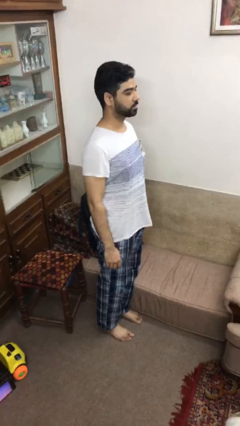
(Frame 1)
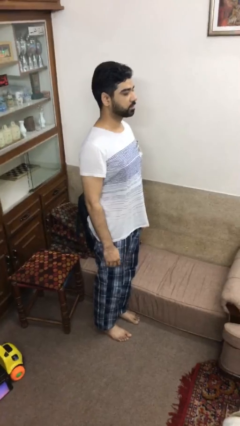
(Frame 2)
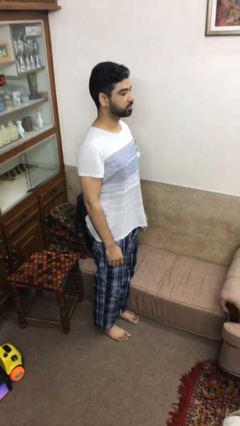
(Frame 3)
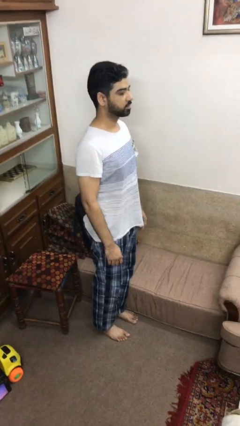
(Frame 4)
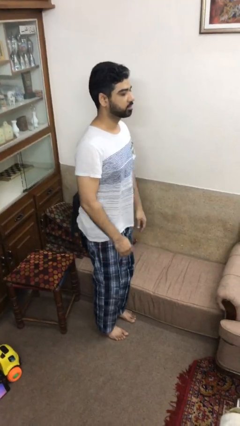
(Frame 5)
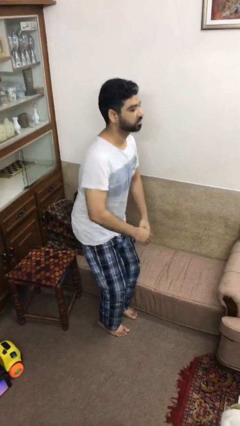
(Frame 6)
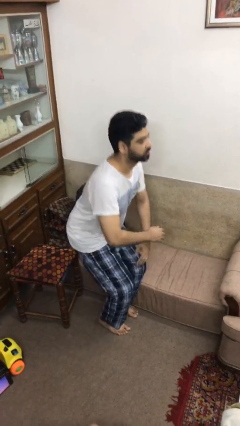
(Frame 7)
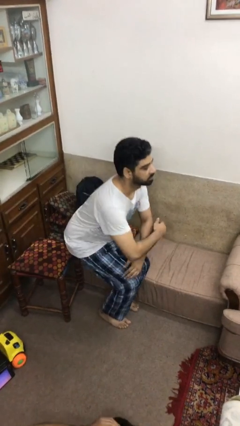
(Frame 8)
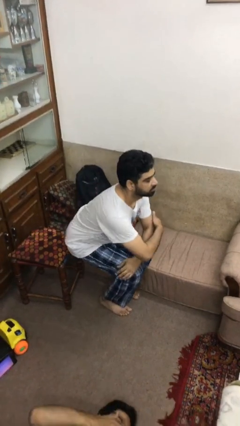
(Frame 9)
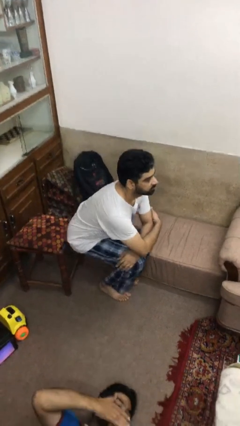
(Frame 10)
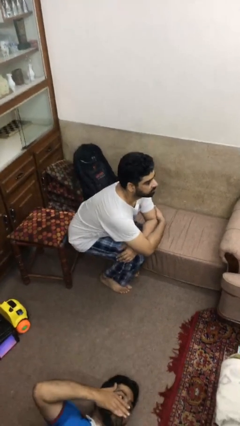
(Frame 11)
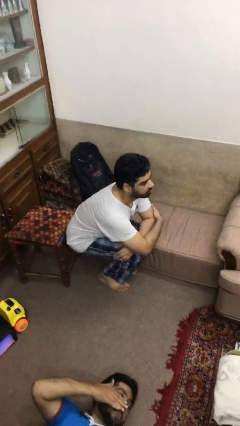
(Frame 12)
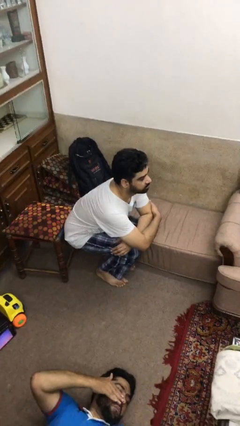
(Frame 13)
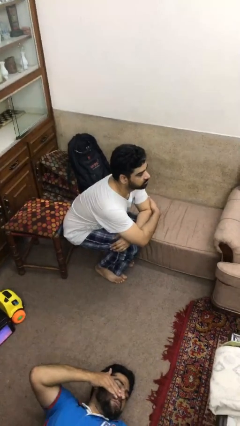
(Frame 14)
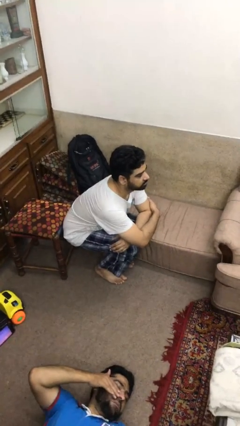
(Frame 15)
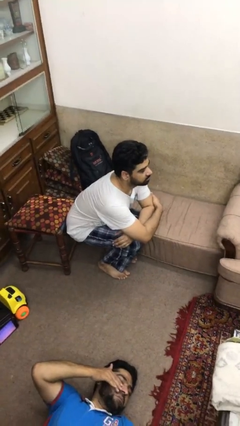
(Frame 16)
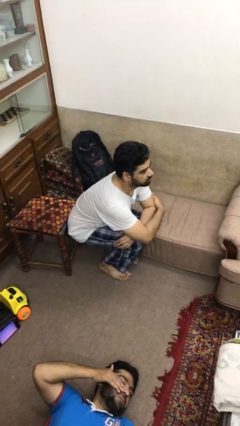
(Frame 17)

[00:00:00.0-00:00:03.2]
person squats

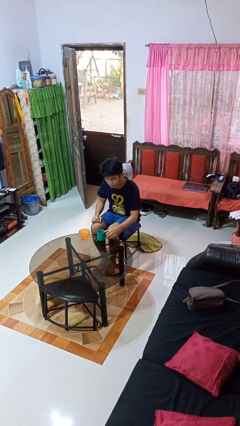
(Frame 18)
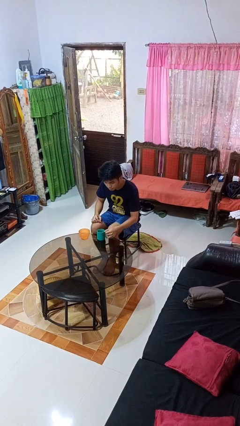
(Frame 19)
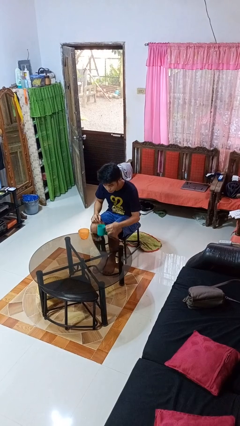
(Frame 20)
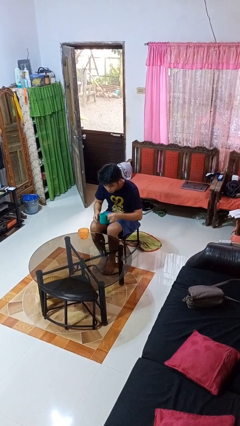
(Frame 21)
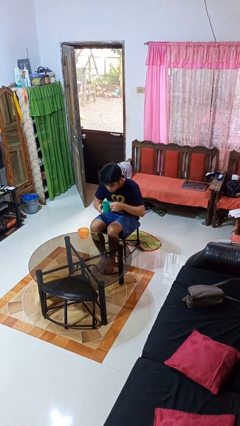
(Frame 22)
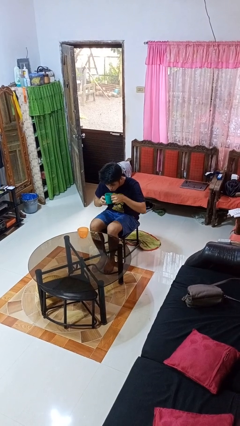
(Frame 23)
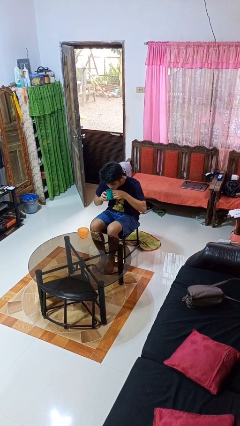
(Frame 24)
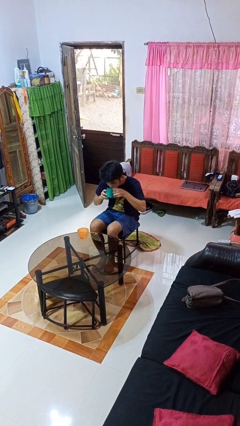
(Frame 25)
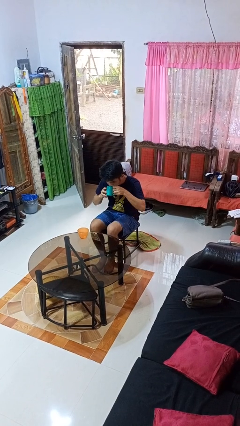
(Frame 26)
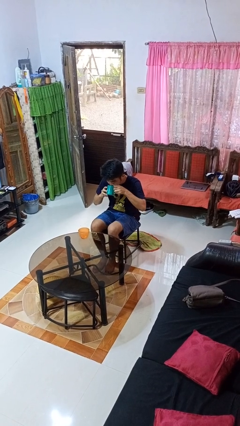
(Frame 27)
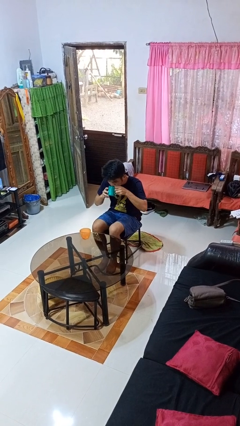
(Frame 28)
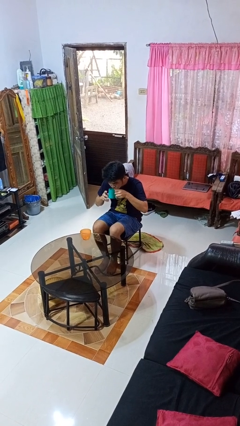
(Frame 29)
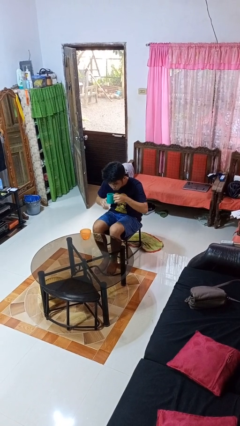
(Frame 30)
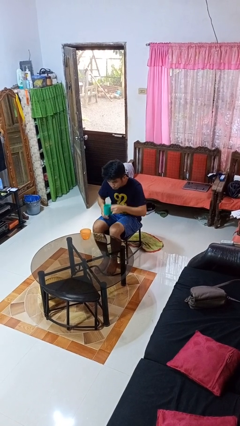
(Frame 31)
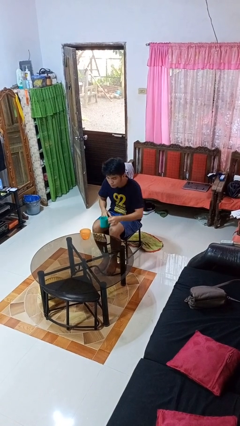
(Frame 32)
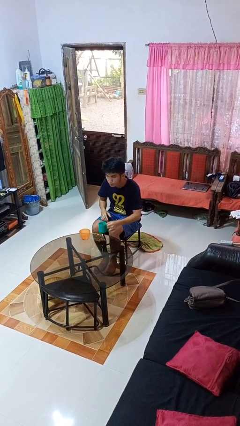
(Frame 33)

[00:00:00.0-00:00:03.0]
person drinks from cup

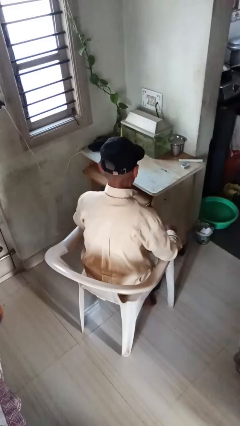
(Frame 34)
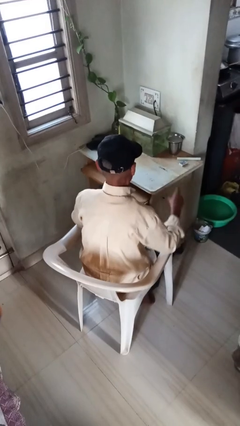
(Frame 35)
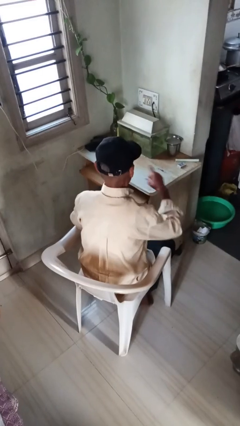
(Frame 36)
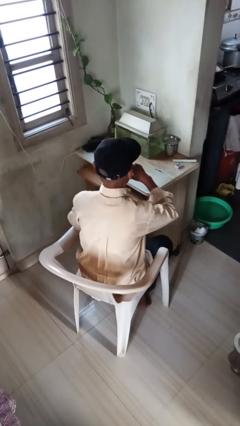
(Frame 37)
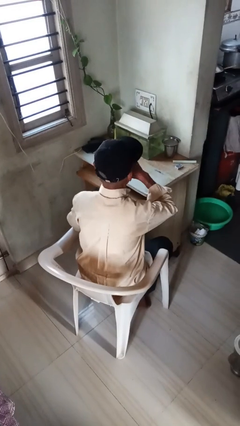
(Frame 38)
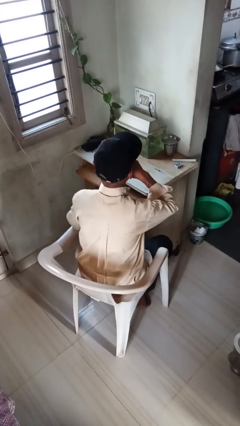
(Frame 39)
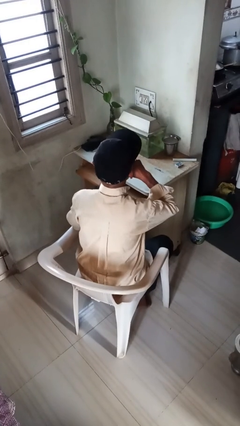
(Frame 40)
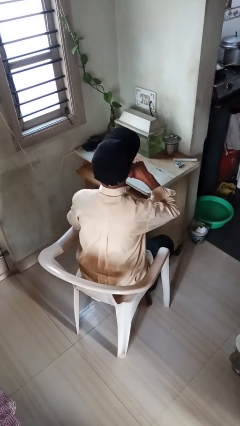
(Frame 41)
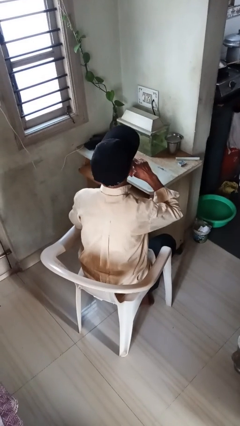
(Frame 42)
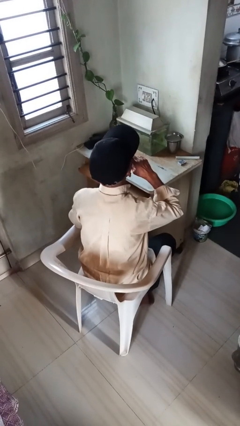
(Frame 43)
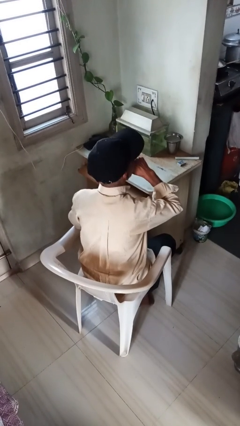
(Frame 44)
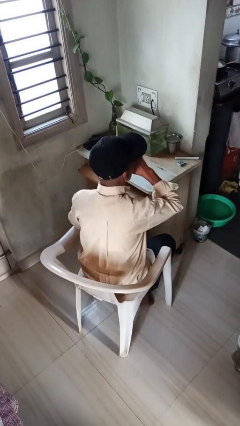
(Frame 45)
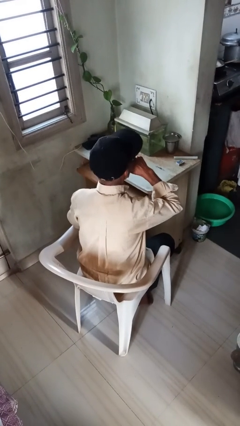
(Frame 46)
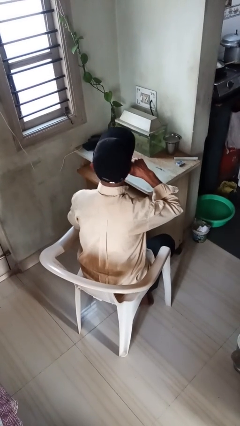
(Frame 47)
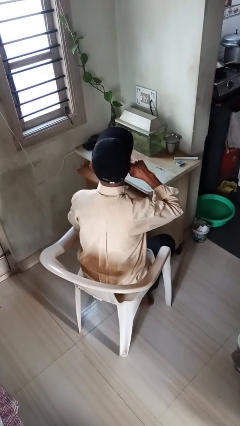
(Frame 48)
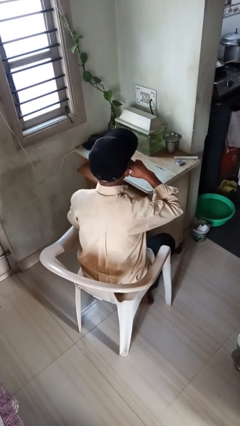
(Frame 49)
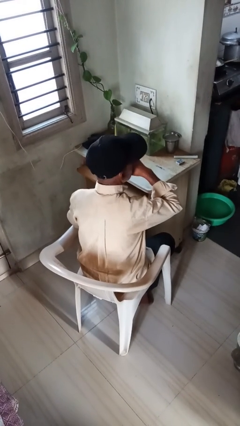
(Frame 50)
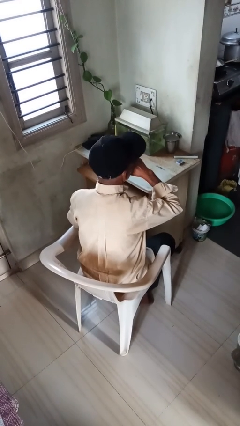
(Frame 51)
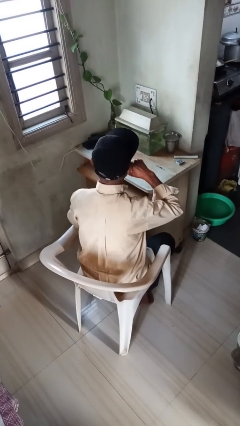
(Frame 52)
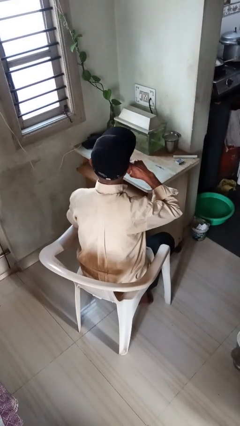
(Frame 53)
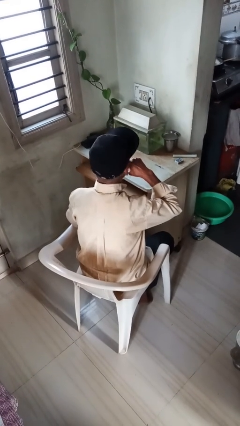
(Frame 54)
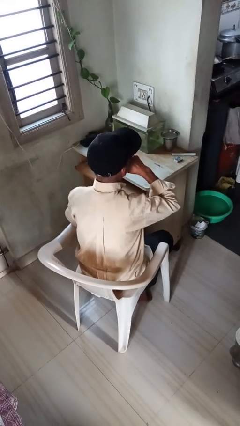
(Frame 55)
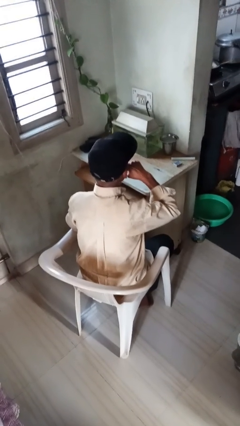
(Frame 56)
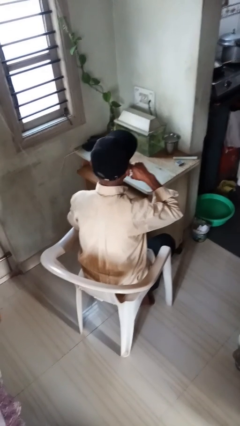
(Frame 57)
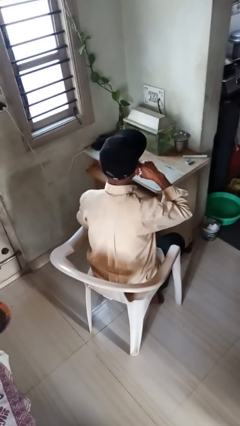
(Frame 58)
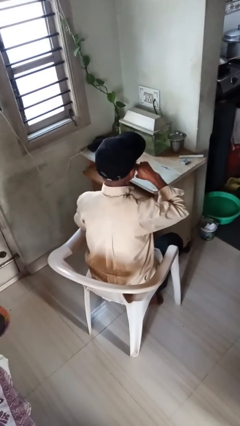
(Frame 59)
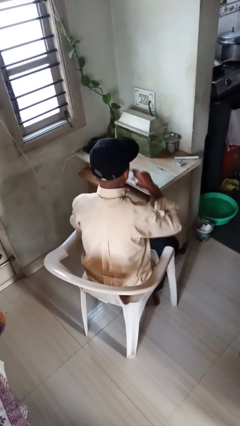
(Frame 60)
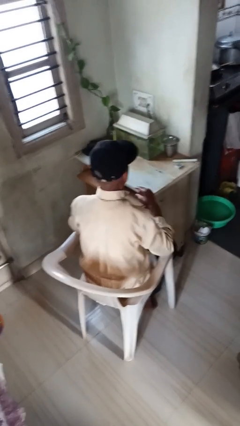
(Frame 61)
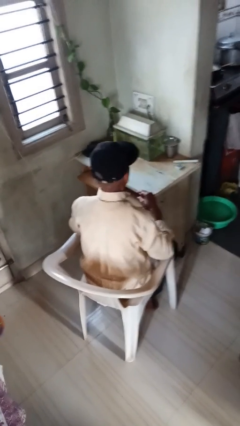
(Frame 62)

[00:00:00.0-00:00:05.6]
person licks fingers

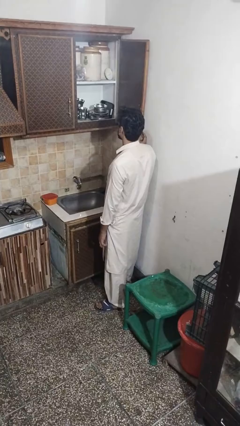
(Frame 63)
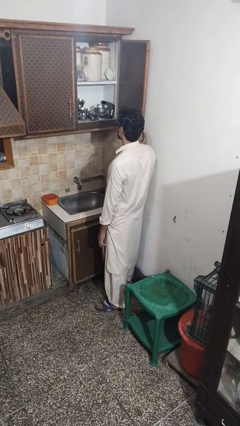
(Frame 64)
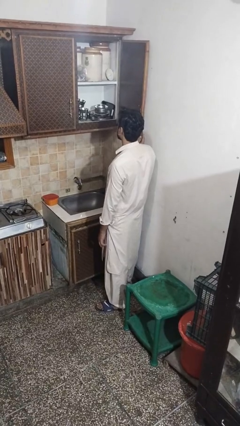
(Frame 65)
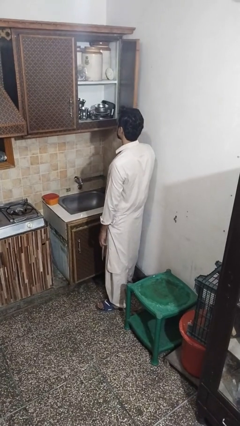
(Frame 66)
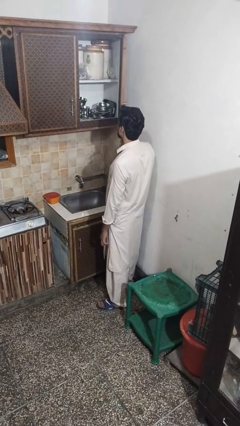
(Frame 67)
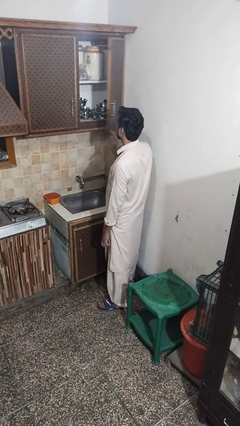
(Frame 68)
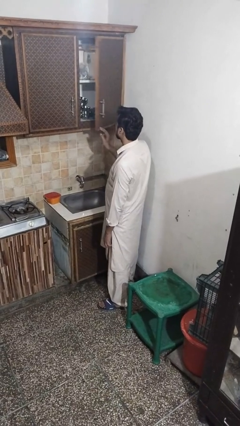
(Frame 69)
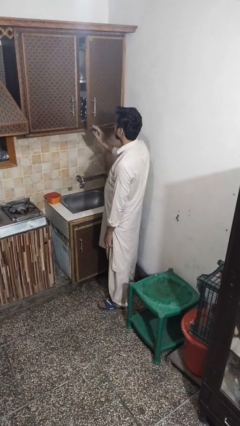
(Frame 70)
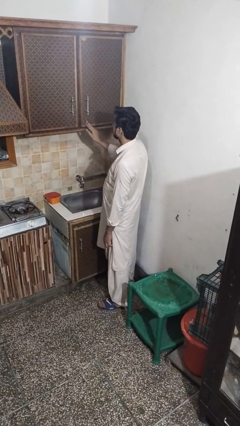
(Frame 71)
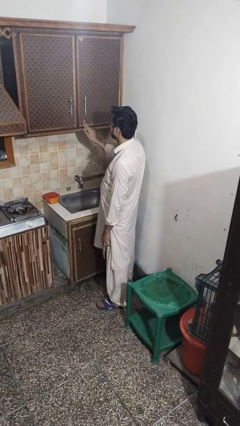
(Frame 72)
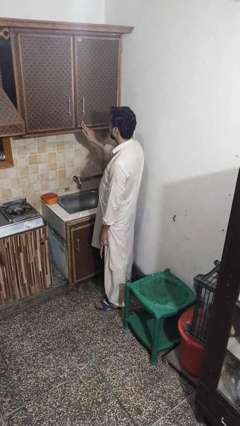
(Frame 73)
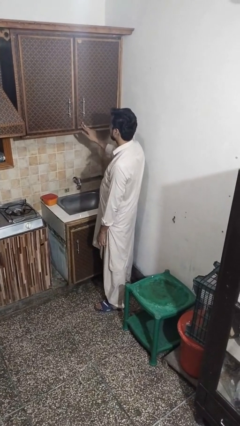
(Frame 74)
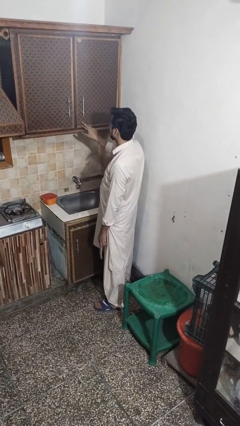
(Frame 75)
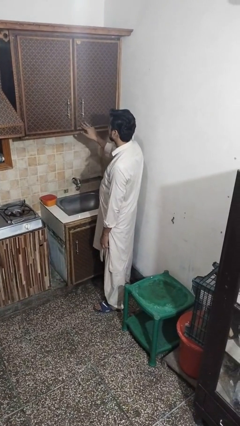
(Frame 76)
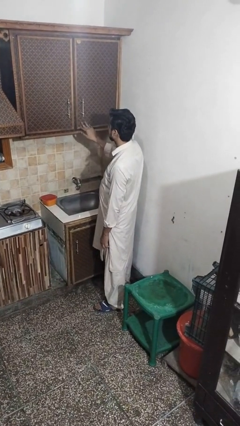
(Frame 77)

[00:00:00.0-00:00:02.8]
person closes cabinet

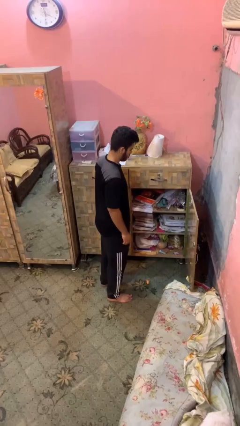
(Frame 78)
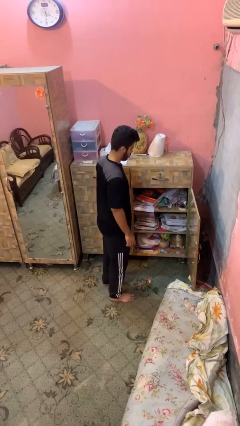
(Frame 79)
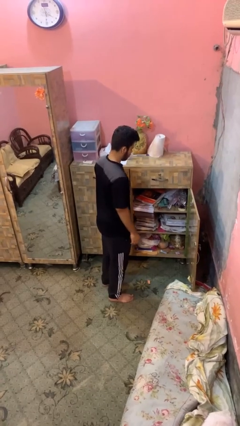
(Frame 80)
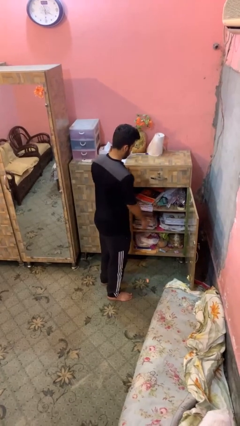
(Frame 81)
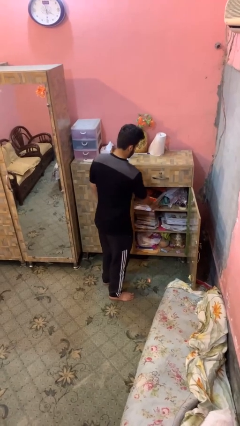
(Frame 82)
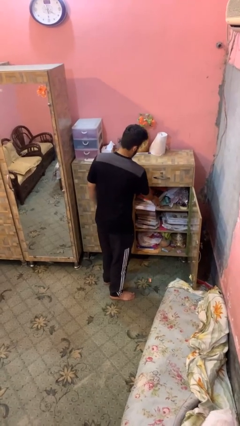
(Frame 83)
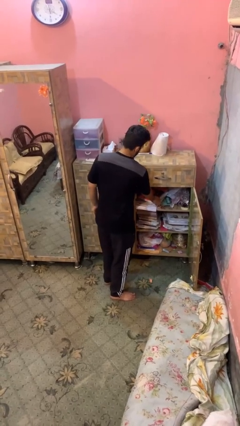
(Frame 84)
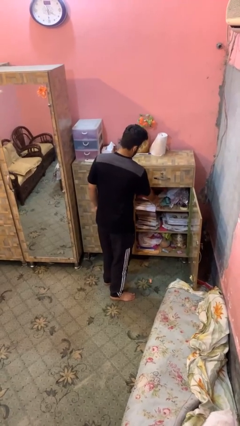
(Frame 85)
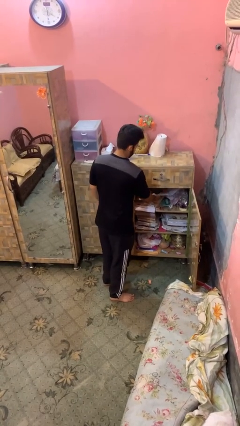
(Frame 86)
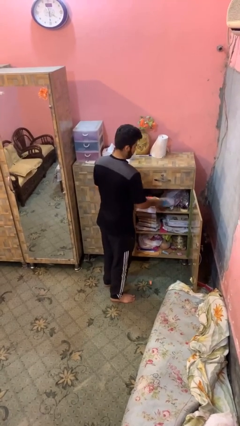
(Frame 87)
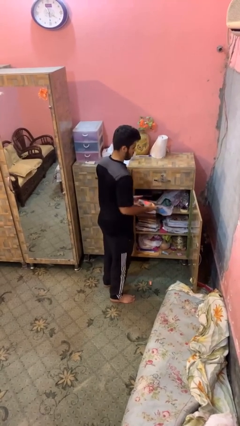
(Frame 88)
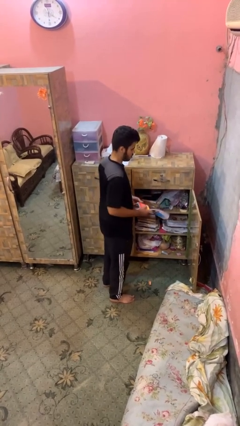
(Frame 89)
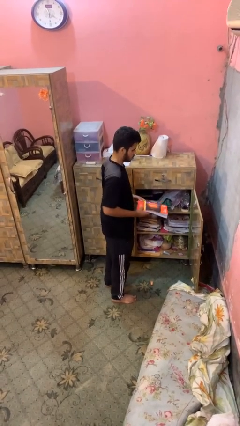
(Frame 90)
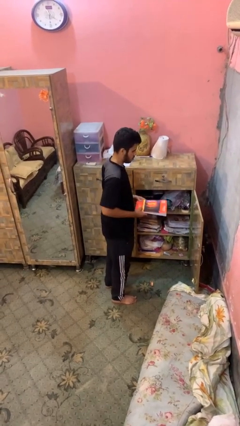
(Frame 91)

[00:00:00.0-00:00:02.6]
person picks up object from cabinet

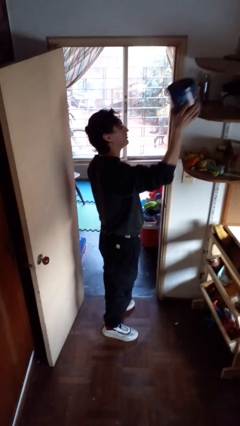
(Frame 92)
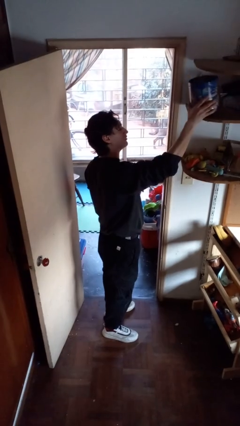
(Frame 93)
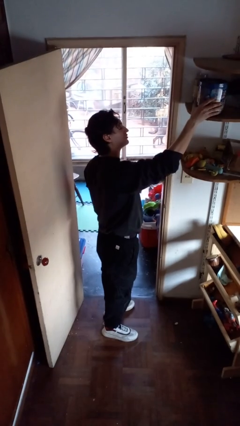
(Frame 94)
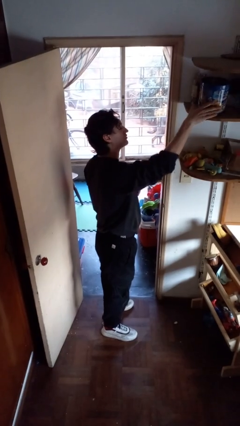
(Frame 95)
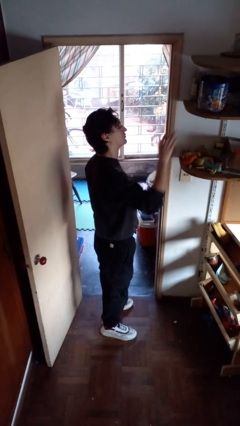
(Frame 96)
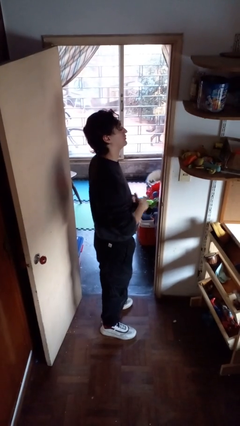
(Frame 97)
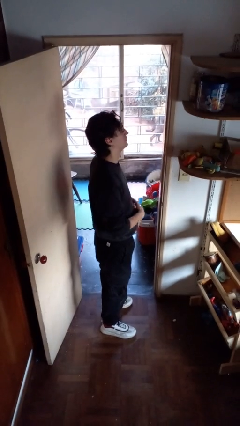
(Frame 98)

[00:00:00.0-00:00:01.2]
person puts down object on shelf
